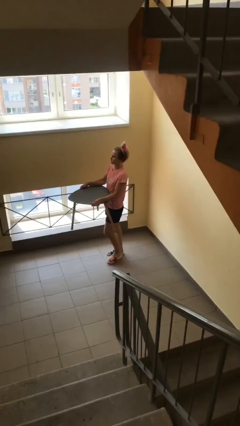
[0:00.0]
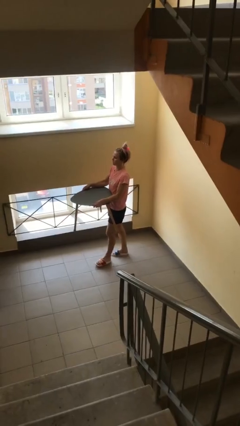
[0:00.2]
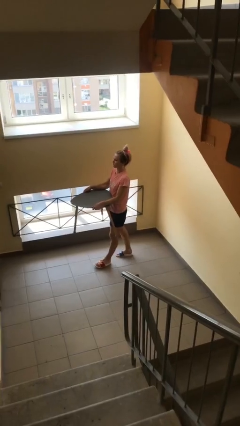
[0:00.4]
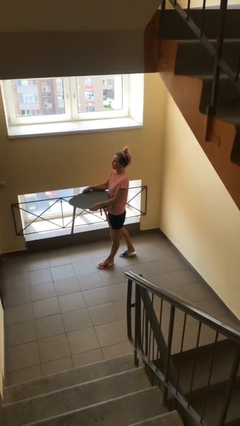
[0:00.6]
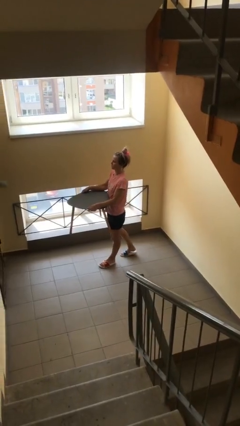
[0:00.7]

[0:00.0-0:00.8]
person carries furniture

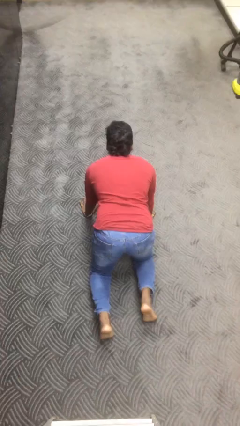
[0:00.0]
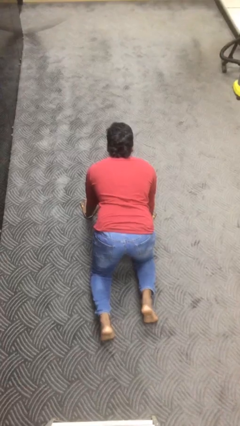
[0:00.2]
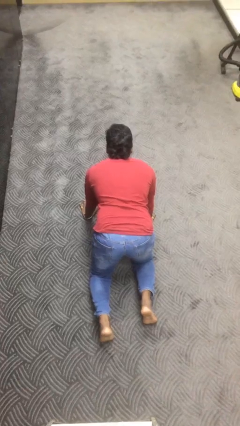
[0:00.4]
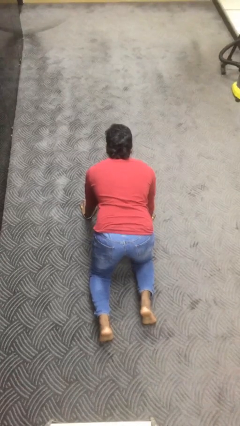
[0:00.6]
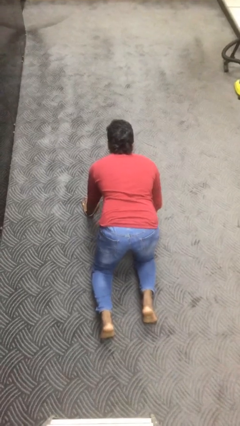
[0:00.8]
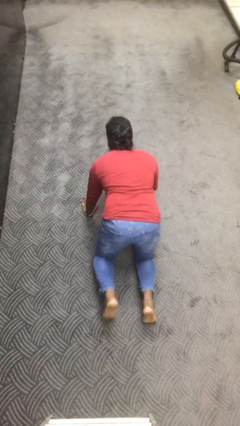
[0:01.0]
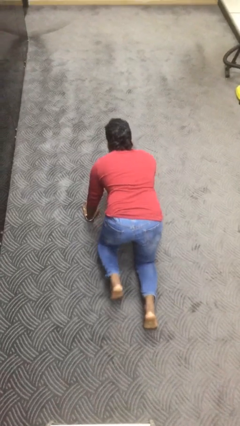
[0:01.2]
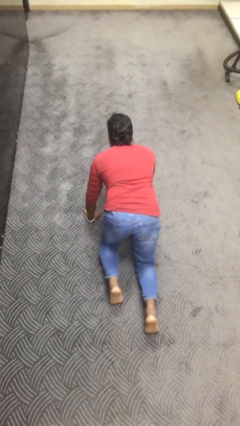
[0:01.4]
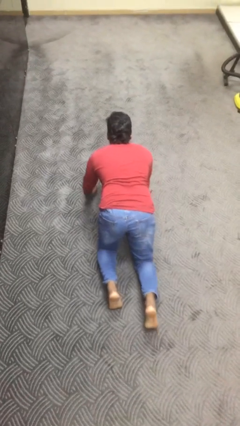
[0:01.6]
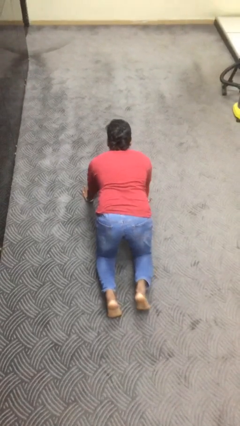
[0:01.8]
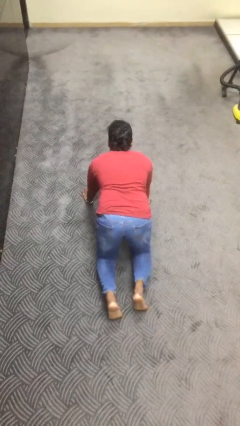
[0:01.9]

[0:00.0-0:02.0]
person crawls

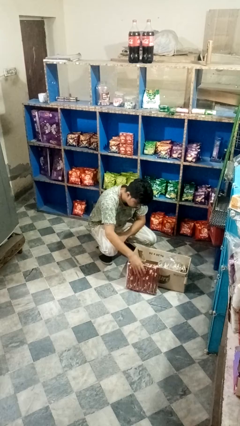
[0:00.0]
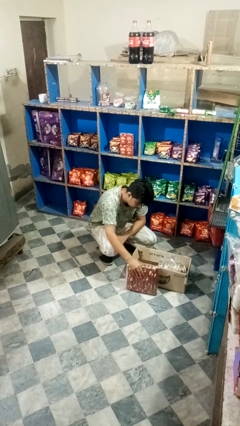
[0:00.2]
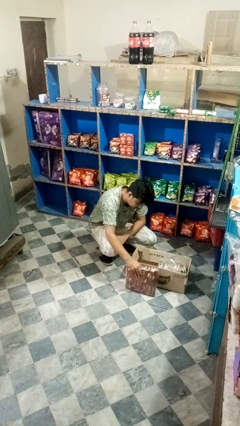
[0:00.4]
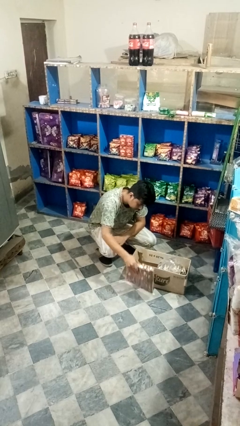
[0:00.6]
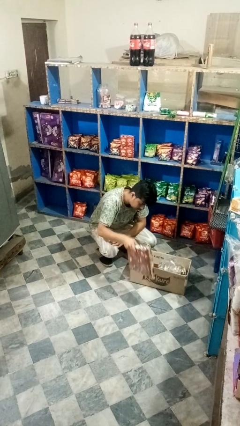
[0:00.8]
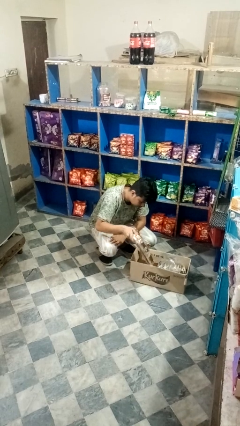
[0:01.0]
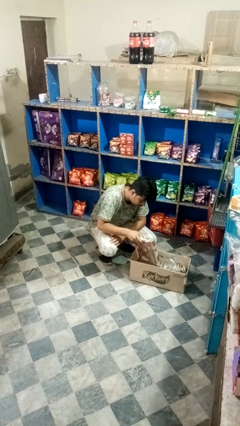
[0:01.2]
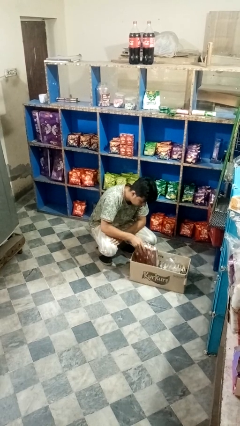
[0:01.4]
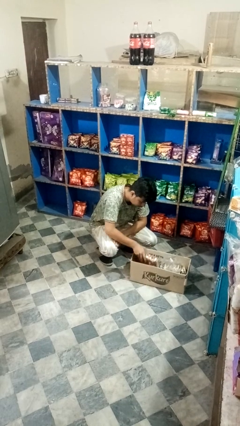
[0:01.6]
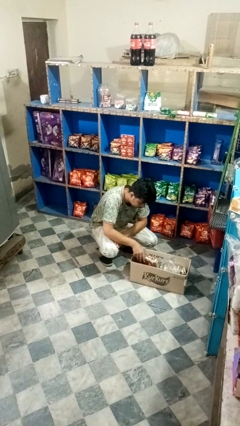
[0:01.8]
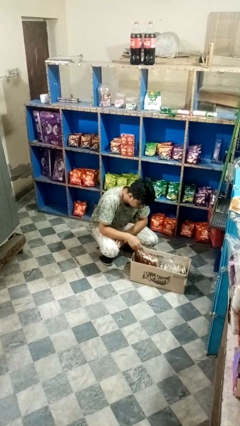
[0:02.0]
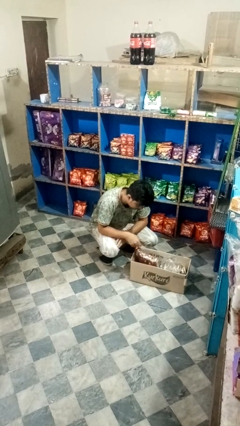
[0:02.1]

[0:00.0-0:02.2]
person puts object into box

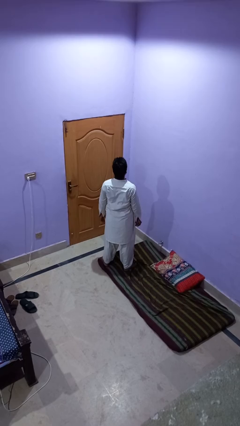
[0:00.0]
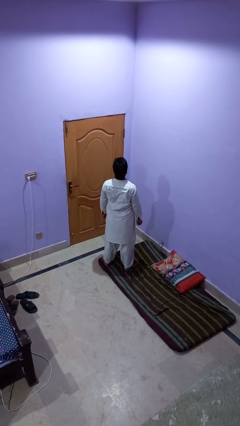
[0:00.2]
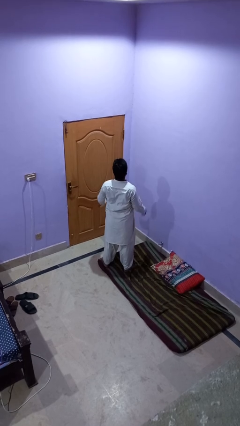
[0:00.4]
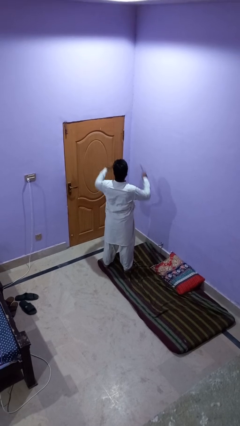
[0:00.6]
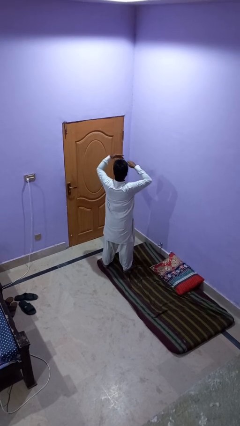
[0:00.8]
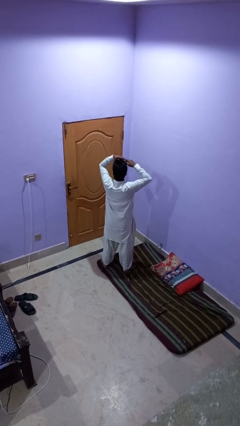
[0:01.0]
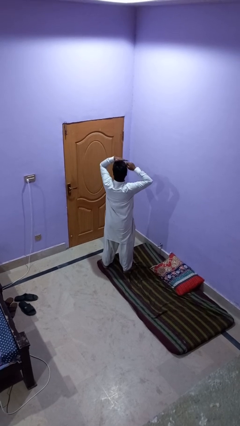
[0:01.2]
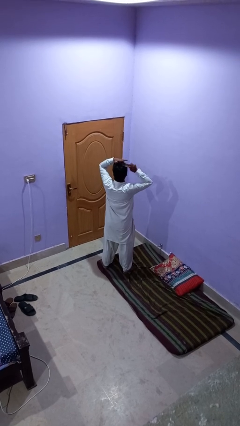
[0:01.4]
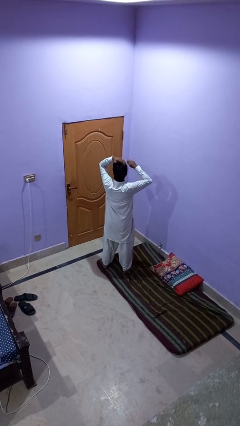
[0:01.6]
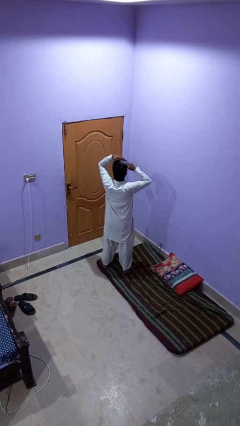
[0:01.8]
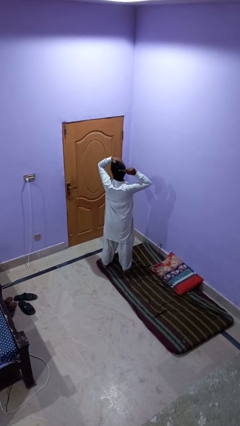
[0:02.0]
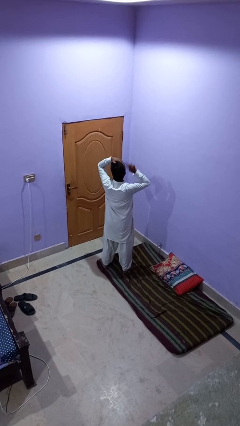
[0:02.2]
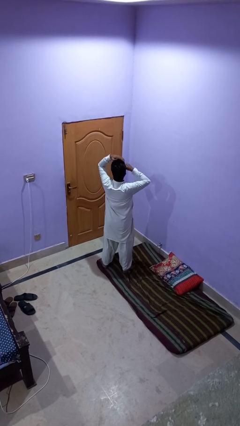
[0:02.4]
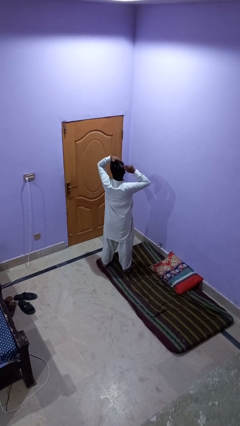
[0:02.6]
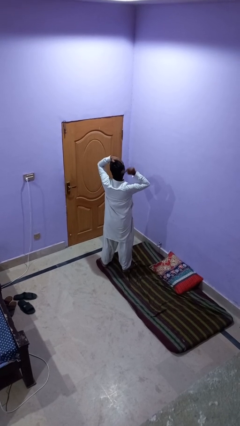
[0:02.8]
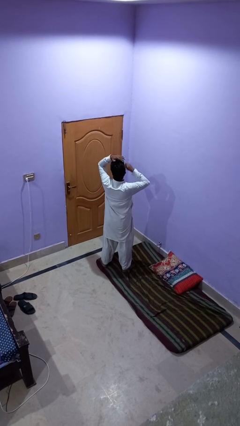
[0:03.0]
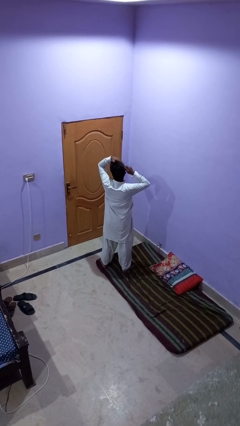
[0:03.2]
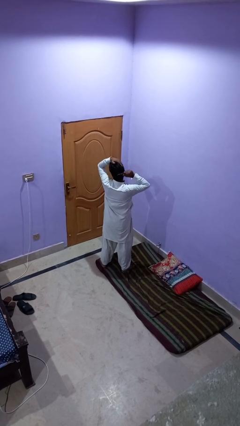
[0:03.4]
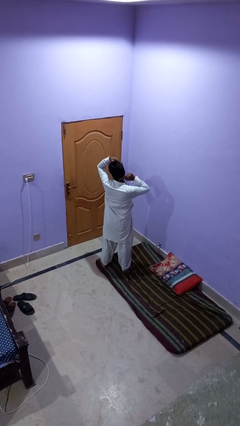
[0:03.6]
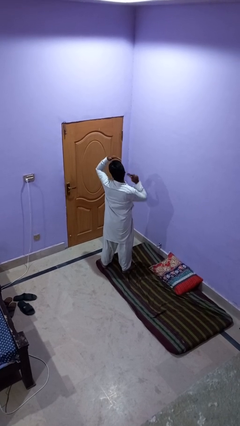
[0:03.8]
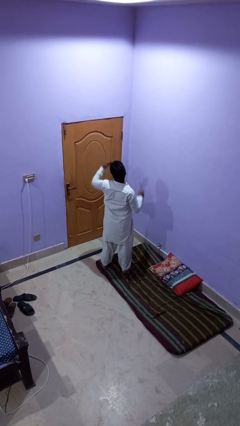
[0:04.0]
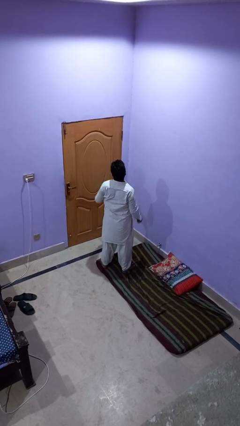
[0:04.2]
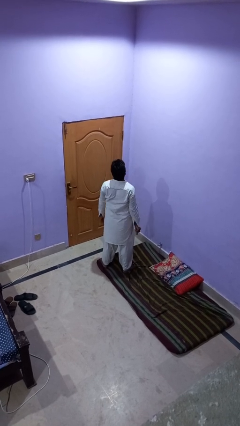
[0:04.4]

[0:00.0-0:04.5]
person brushes hair

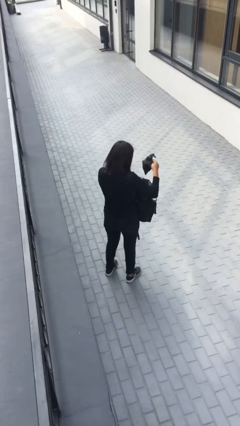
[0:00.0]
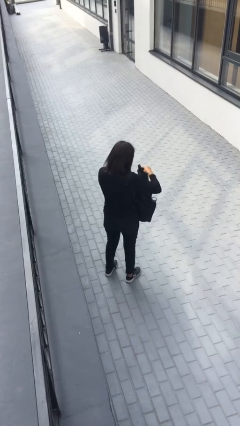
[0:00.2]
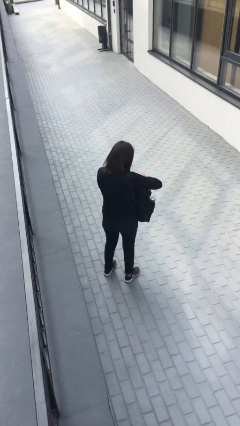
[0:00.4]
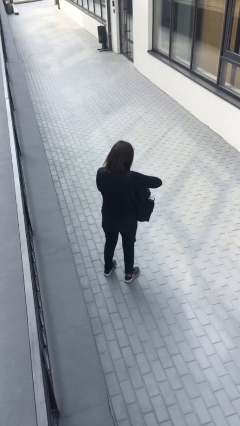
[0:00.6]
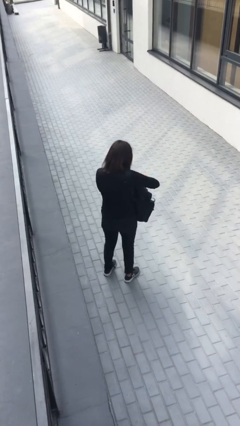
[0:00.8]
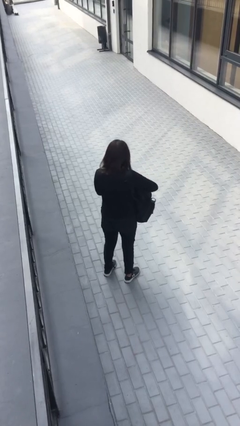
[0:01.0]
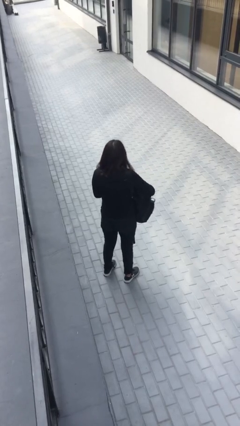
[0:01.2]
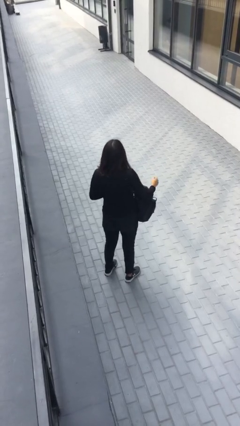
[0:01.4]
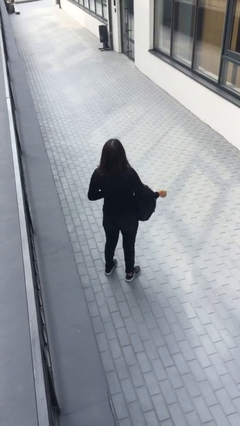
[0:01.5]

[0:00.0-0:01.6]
person puts object into backpack

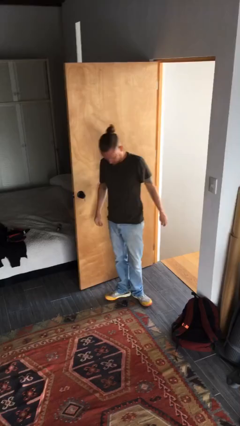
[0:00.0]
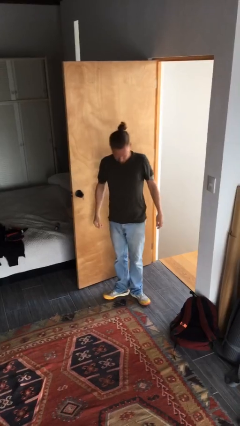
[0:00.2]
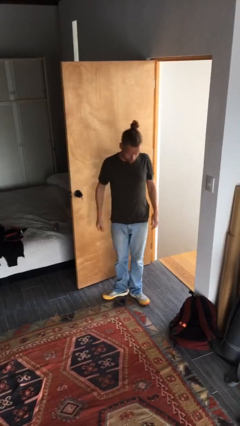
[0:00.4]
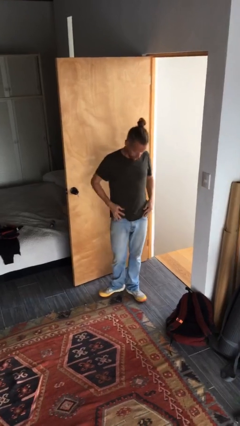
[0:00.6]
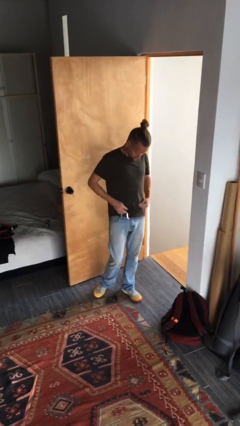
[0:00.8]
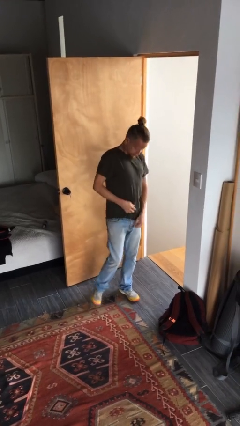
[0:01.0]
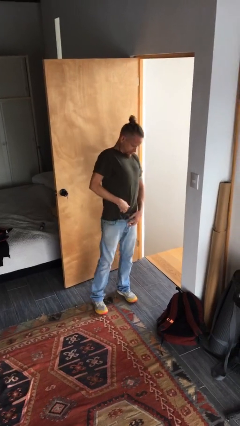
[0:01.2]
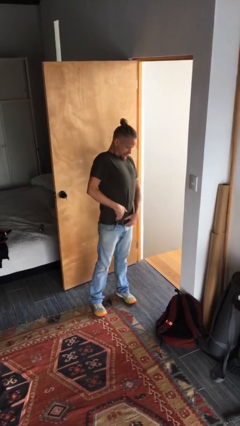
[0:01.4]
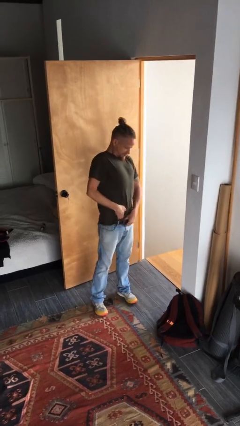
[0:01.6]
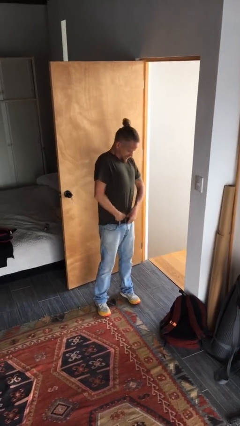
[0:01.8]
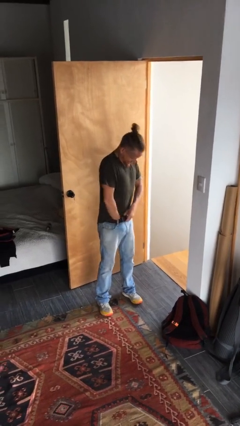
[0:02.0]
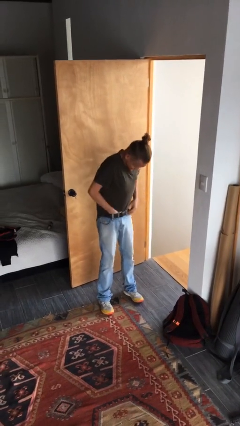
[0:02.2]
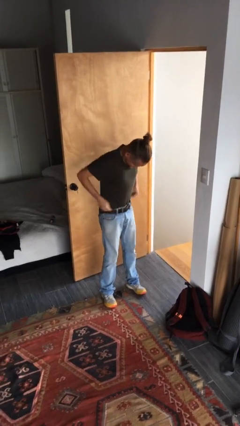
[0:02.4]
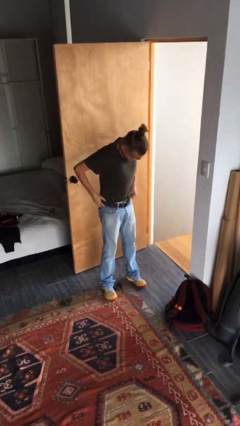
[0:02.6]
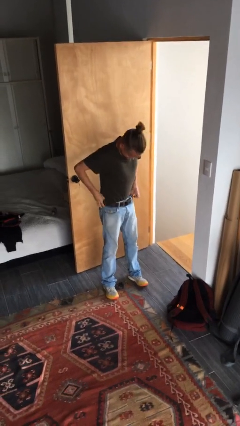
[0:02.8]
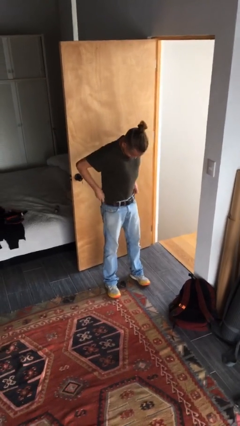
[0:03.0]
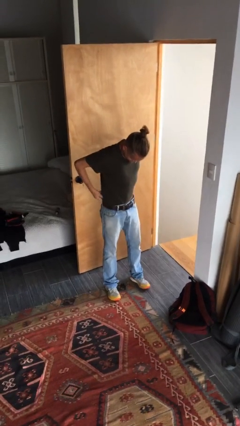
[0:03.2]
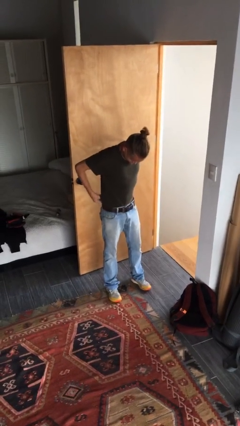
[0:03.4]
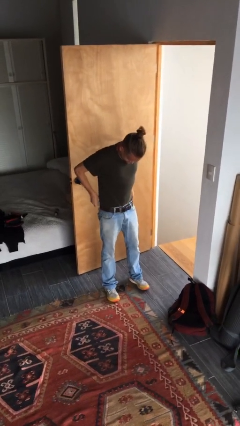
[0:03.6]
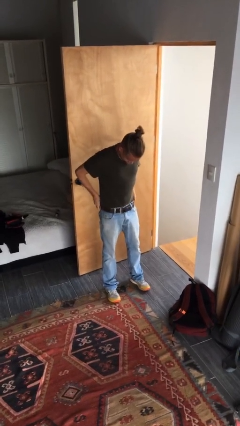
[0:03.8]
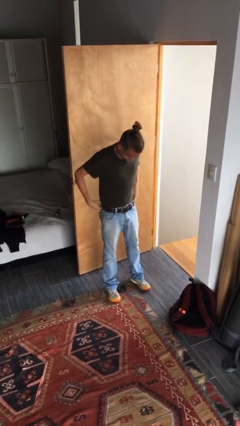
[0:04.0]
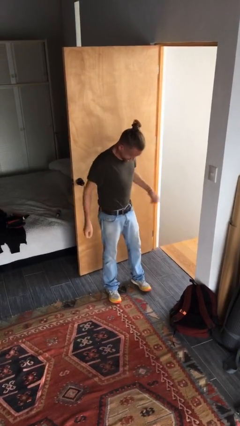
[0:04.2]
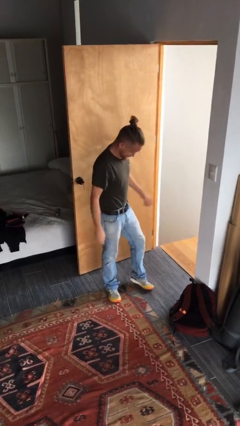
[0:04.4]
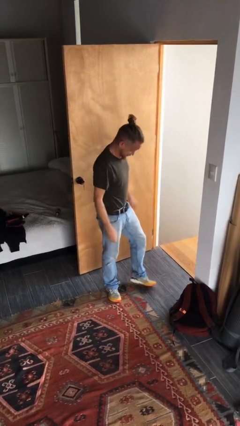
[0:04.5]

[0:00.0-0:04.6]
person tucks in shirt

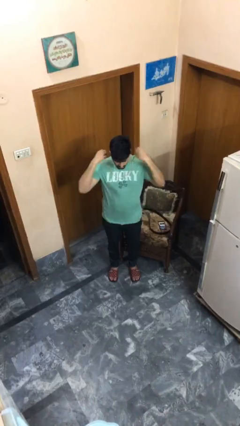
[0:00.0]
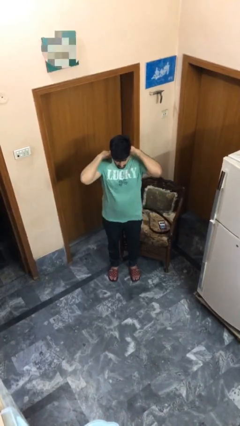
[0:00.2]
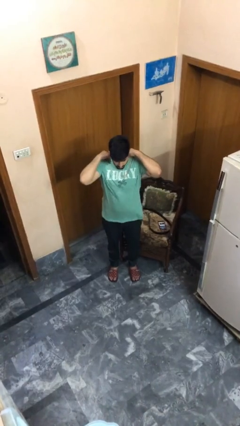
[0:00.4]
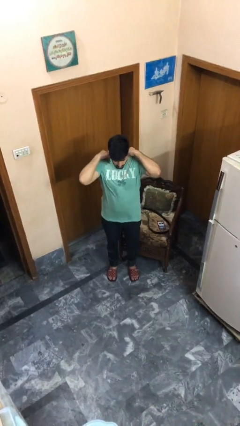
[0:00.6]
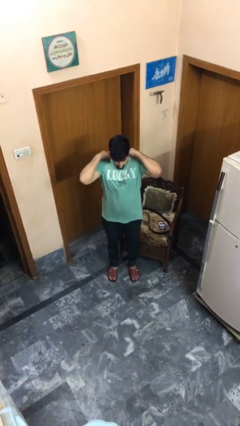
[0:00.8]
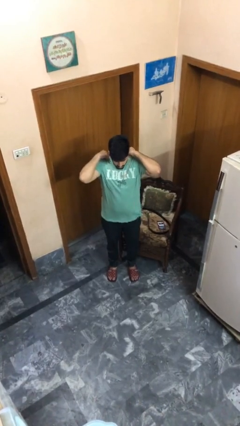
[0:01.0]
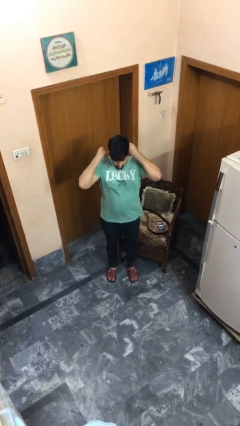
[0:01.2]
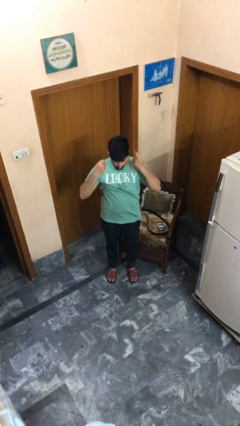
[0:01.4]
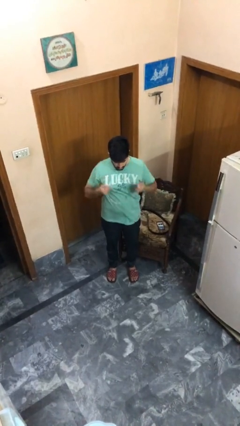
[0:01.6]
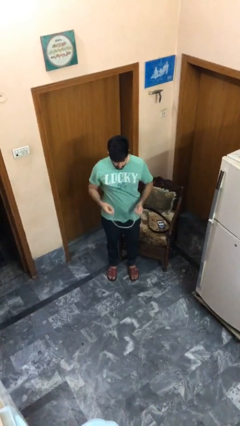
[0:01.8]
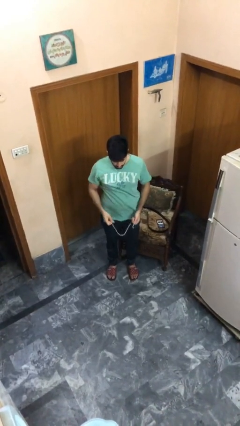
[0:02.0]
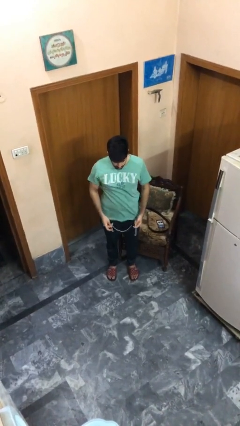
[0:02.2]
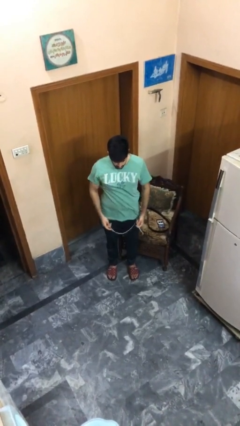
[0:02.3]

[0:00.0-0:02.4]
person takes off necklace
